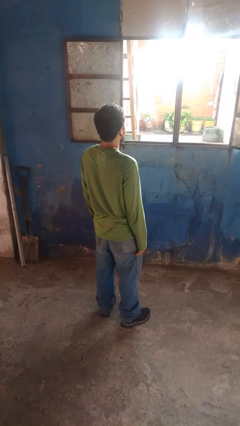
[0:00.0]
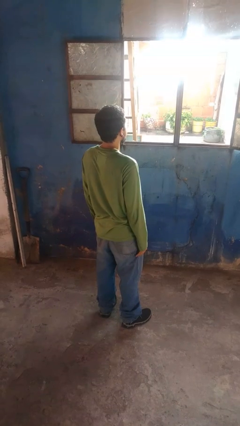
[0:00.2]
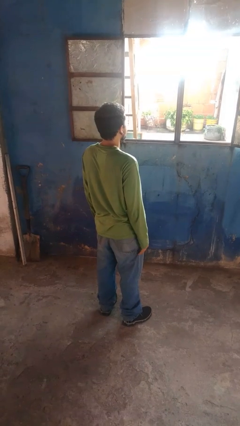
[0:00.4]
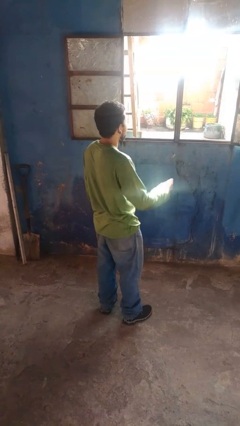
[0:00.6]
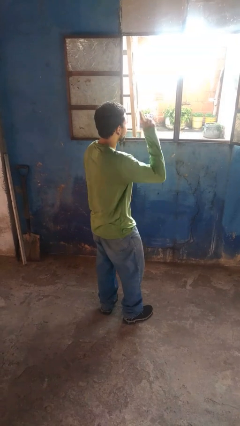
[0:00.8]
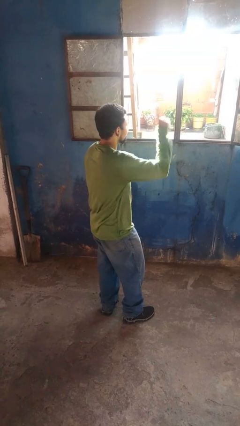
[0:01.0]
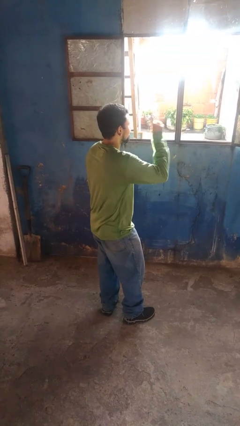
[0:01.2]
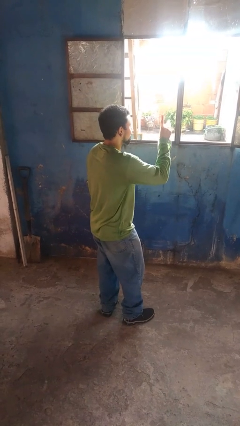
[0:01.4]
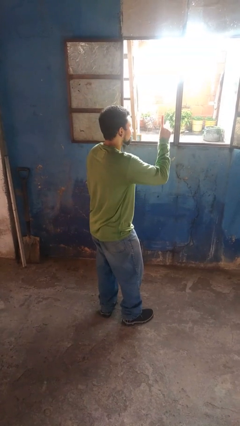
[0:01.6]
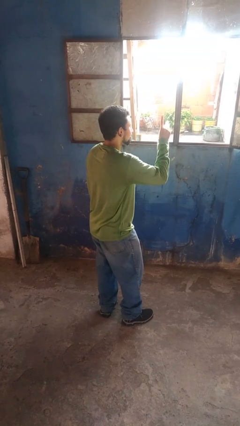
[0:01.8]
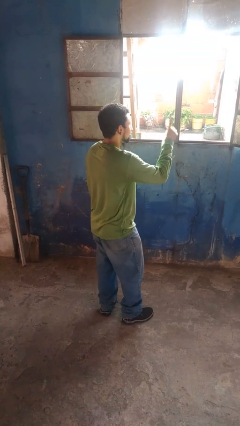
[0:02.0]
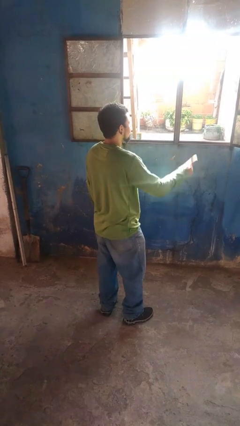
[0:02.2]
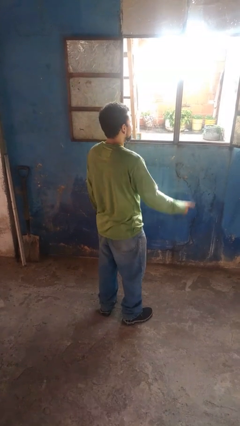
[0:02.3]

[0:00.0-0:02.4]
person gestures number one

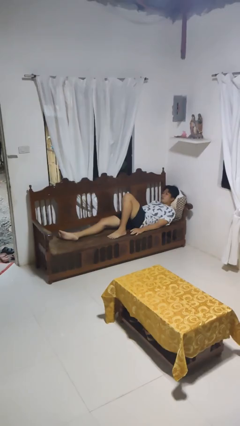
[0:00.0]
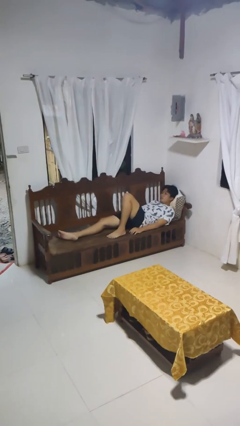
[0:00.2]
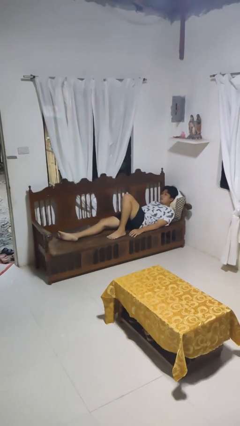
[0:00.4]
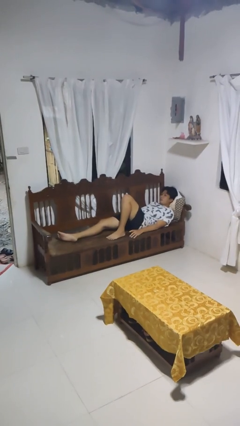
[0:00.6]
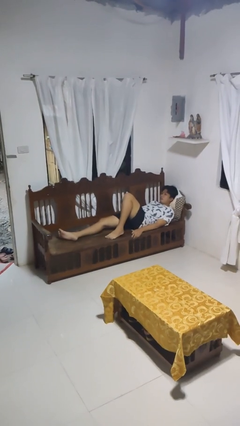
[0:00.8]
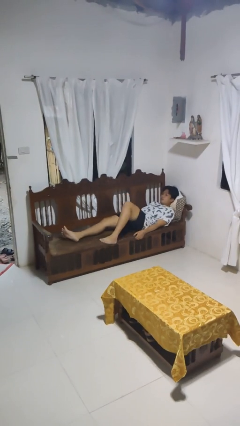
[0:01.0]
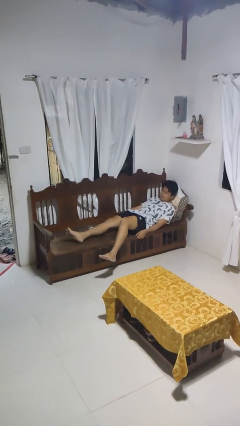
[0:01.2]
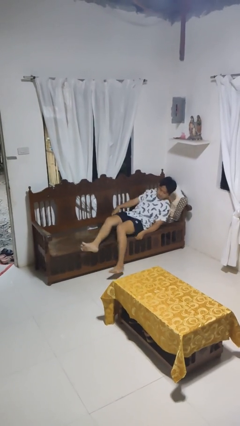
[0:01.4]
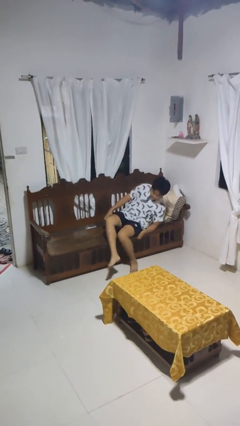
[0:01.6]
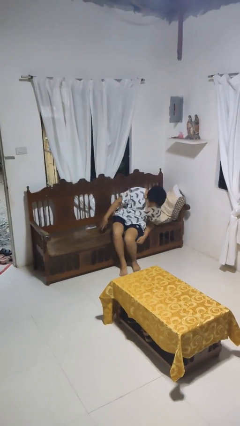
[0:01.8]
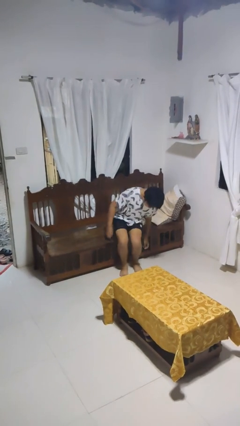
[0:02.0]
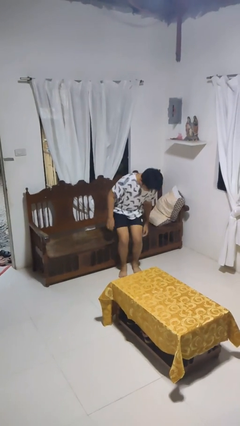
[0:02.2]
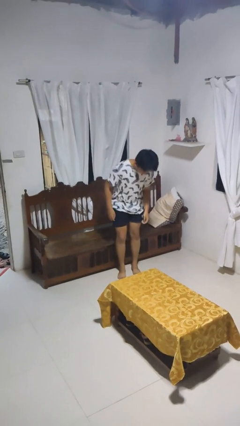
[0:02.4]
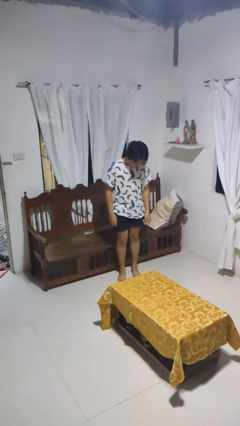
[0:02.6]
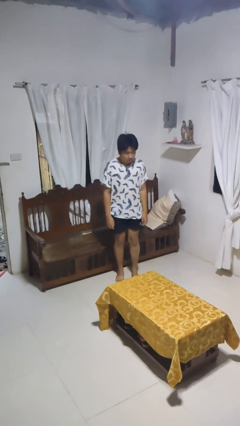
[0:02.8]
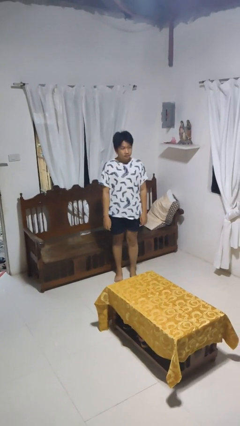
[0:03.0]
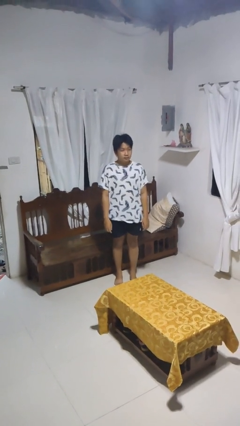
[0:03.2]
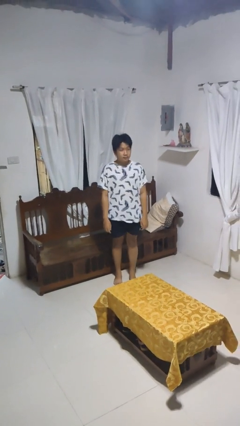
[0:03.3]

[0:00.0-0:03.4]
person stands up

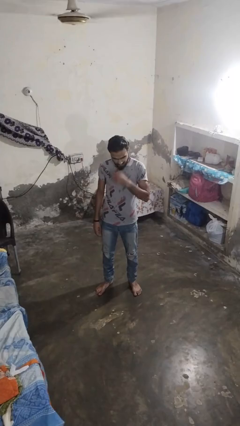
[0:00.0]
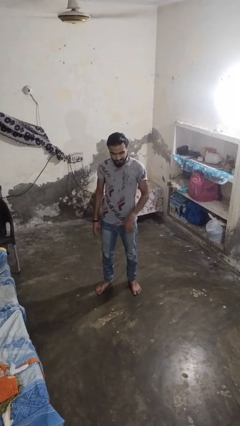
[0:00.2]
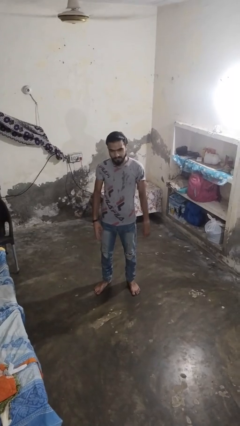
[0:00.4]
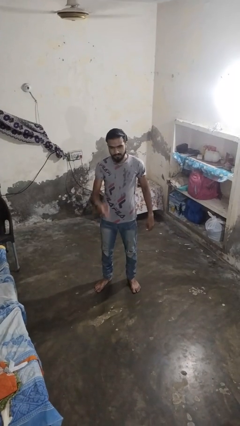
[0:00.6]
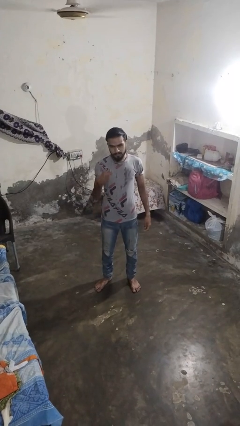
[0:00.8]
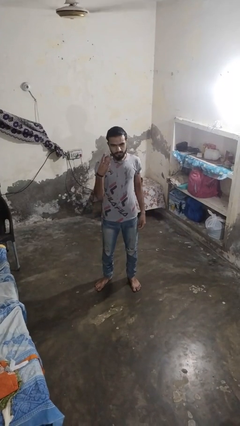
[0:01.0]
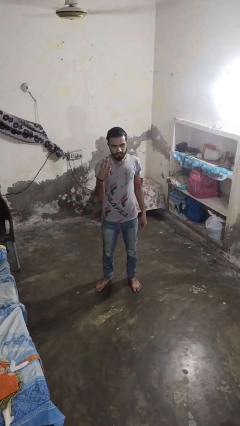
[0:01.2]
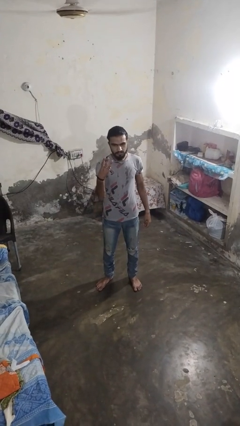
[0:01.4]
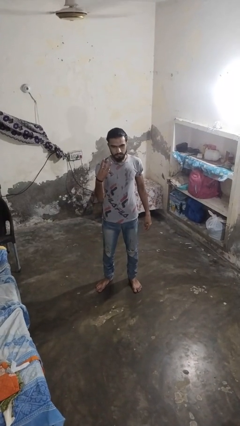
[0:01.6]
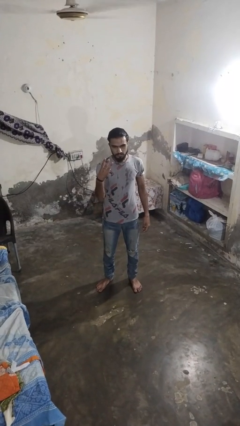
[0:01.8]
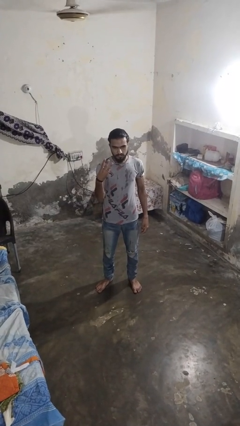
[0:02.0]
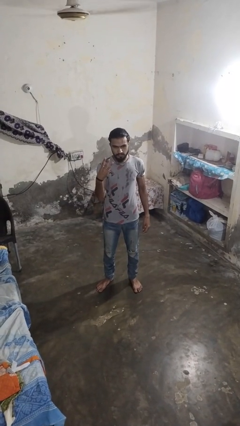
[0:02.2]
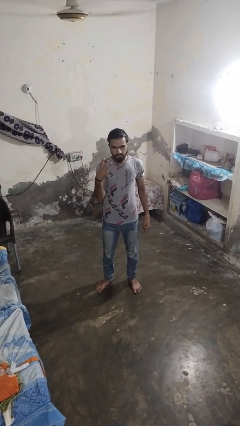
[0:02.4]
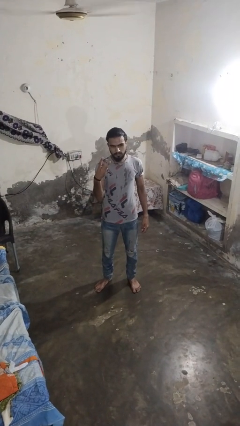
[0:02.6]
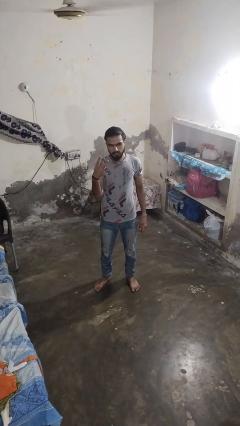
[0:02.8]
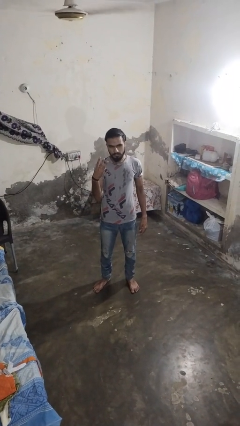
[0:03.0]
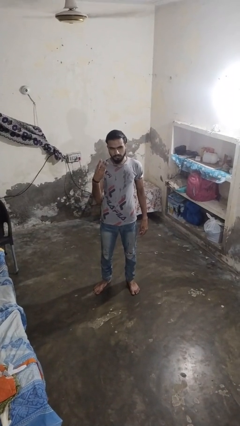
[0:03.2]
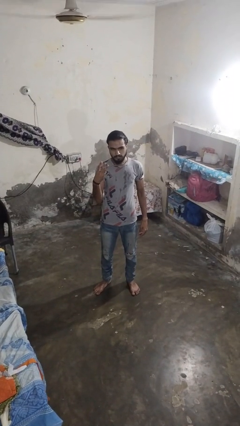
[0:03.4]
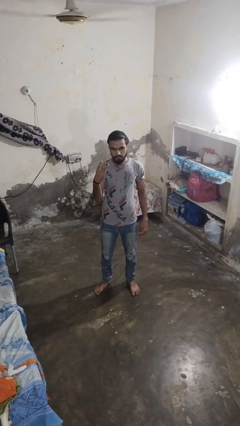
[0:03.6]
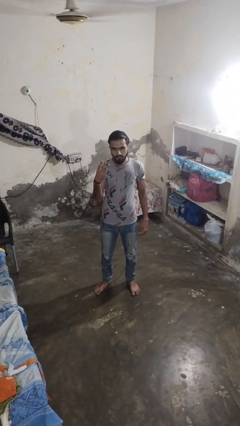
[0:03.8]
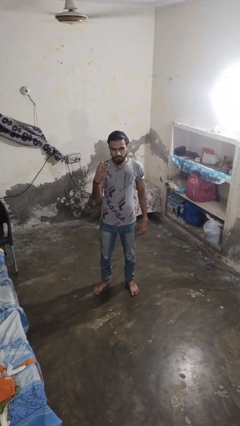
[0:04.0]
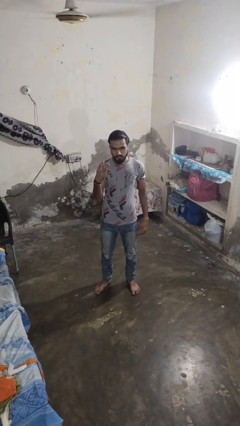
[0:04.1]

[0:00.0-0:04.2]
person gestures number three

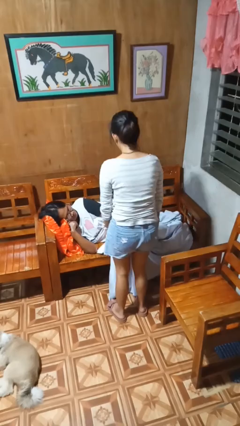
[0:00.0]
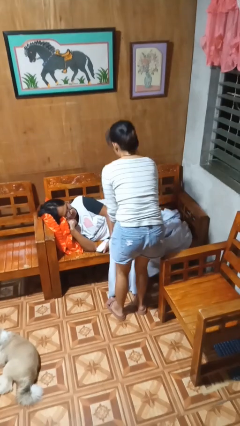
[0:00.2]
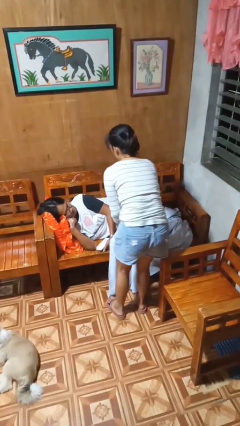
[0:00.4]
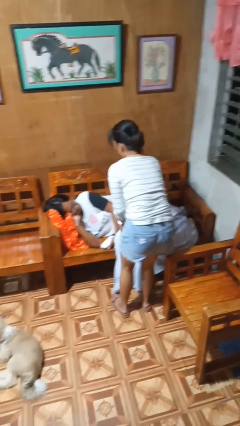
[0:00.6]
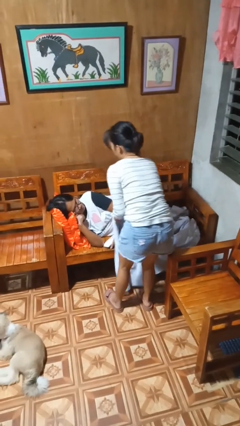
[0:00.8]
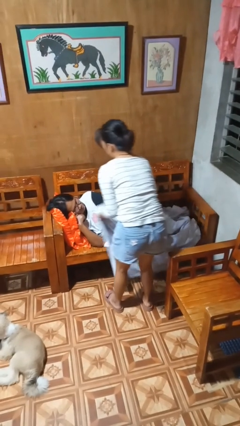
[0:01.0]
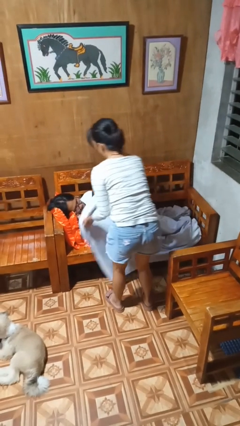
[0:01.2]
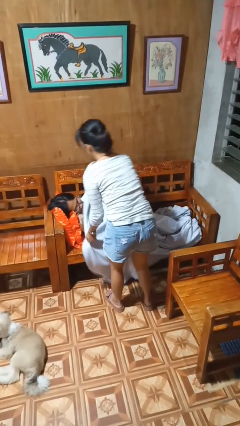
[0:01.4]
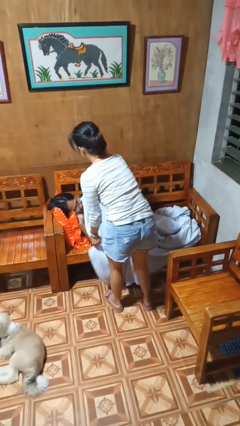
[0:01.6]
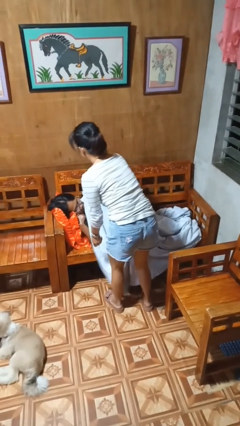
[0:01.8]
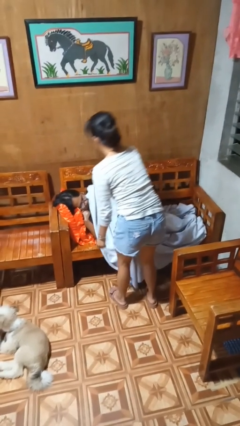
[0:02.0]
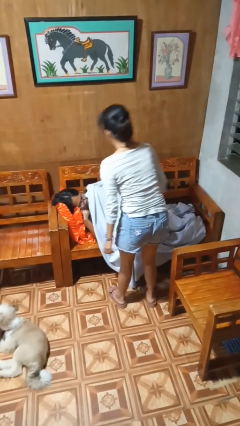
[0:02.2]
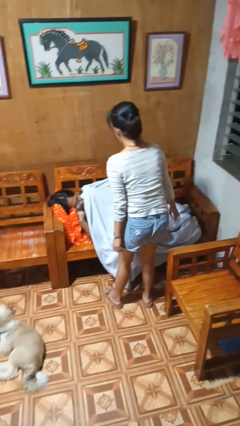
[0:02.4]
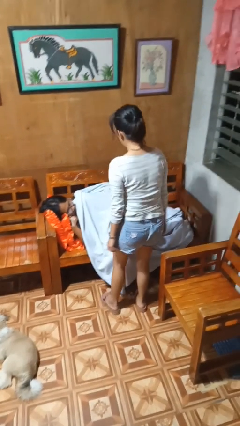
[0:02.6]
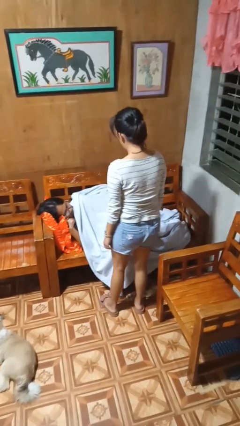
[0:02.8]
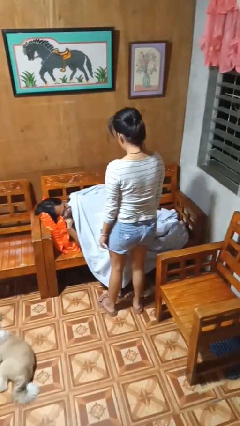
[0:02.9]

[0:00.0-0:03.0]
person covers friend with blanket

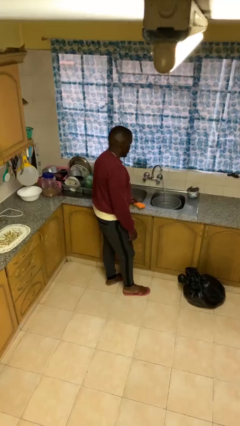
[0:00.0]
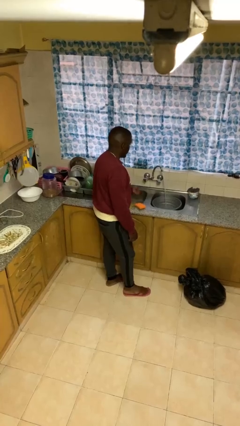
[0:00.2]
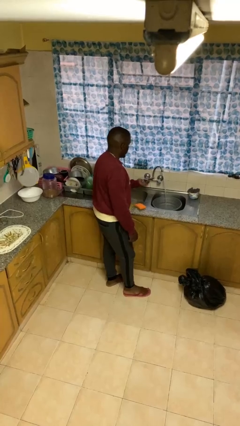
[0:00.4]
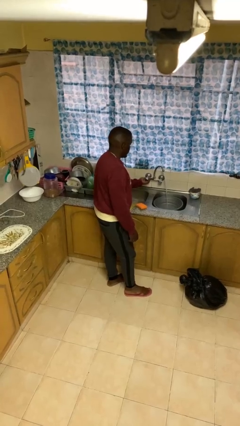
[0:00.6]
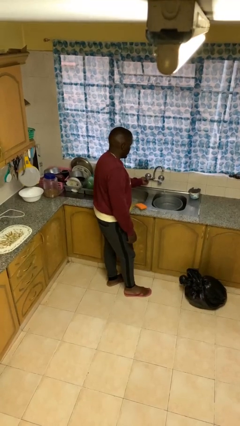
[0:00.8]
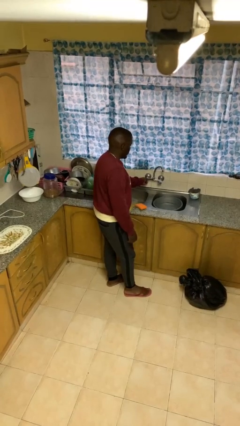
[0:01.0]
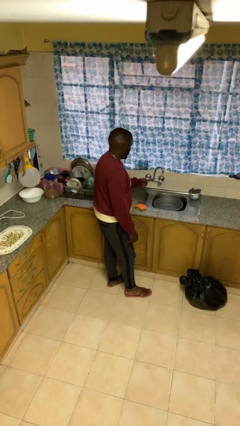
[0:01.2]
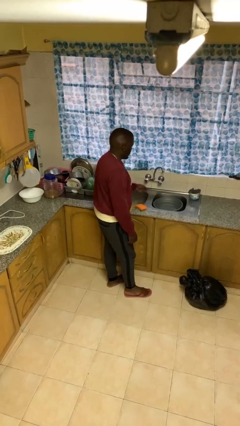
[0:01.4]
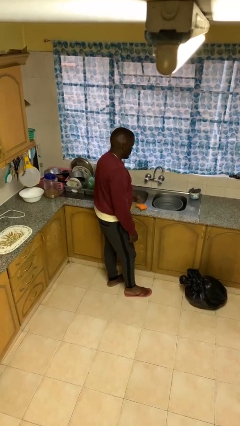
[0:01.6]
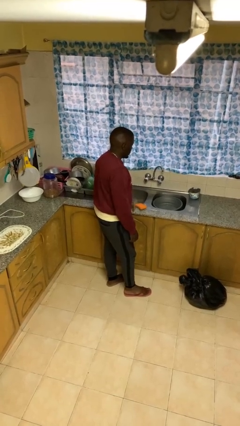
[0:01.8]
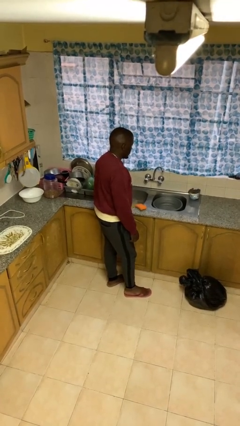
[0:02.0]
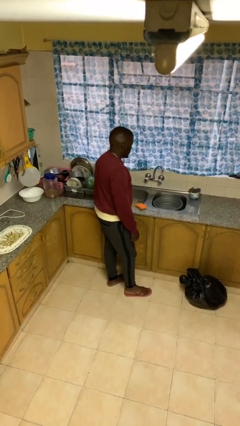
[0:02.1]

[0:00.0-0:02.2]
person turns off faucet

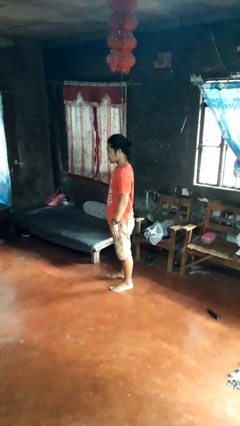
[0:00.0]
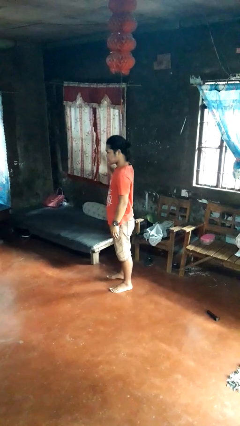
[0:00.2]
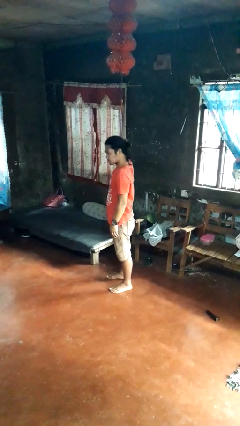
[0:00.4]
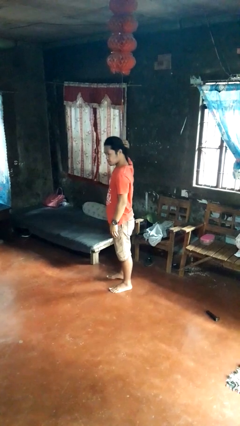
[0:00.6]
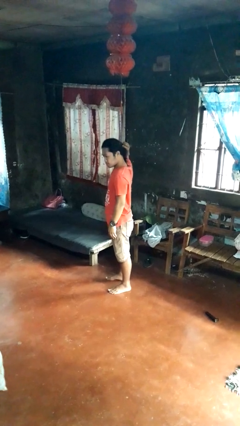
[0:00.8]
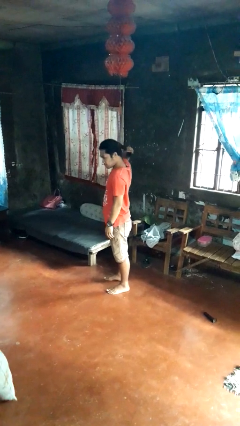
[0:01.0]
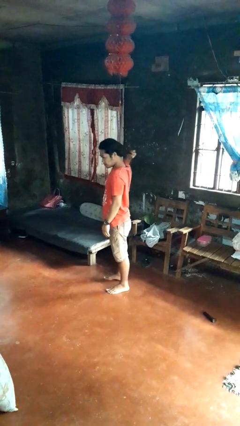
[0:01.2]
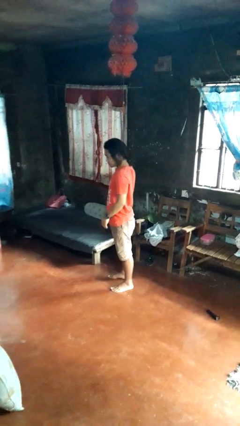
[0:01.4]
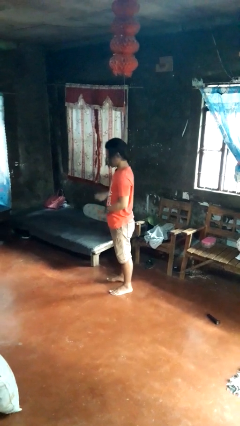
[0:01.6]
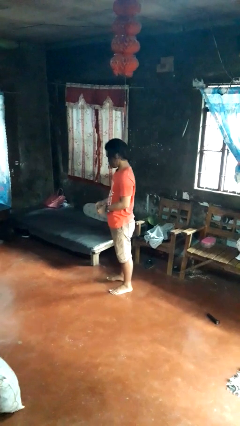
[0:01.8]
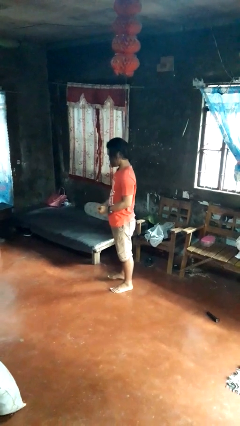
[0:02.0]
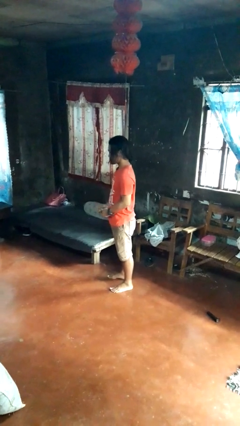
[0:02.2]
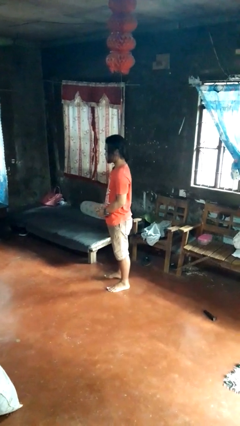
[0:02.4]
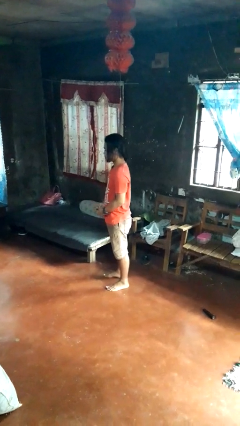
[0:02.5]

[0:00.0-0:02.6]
person takes off hairtie
